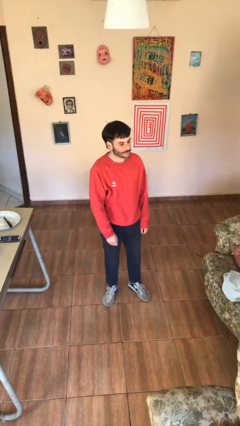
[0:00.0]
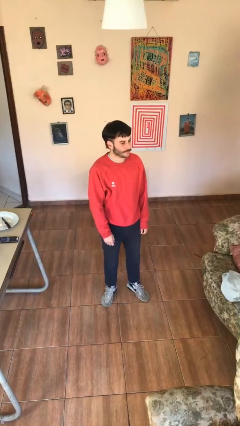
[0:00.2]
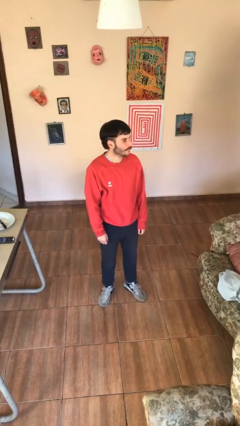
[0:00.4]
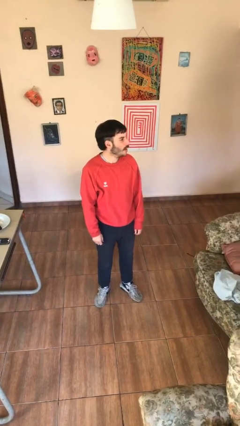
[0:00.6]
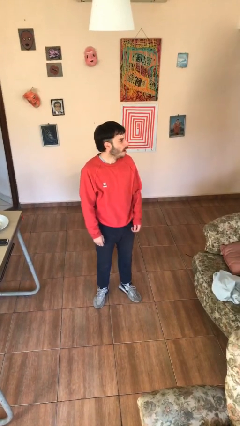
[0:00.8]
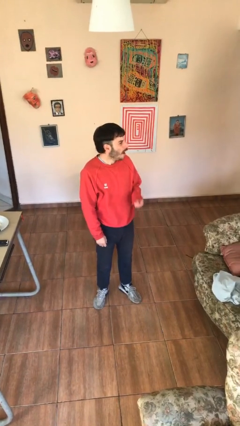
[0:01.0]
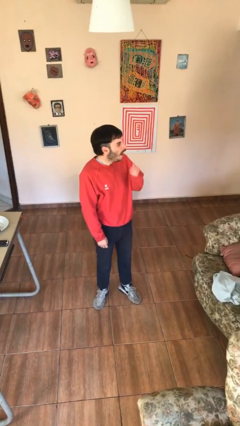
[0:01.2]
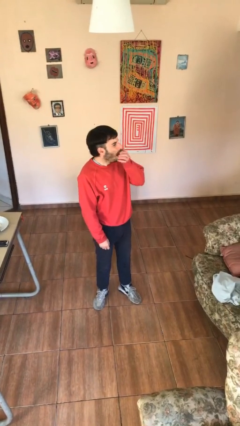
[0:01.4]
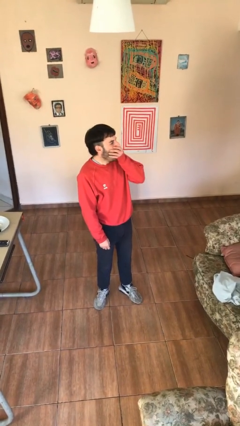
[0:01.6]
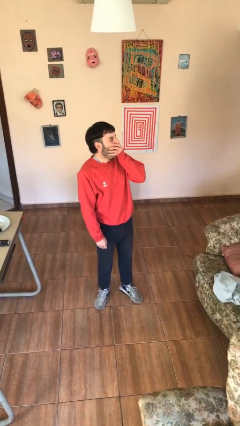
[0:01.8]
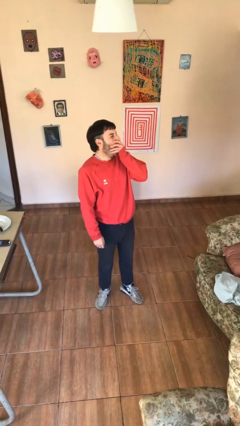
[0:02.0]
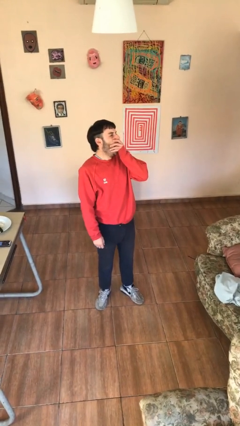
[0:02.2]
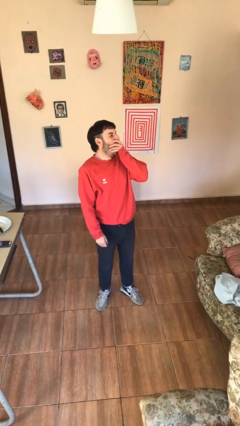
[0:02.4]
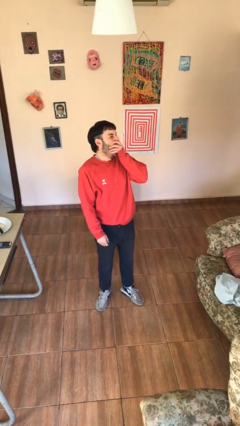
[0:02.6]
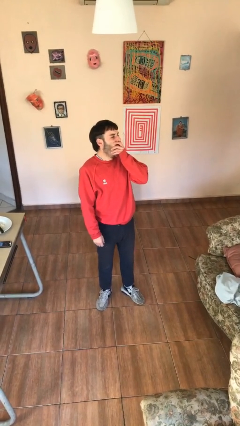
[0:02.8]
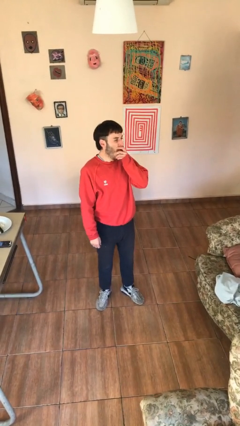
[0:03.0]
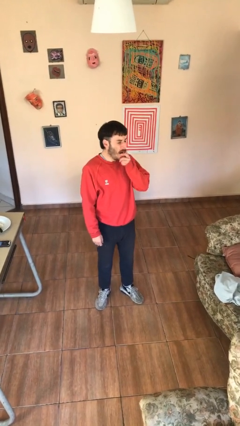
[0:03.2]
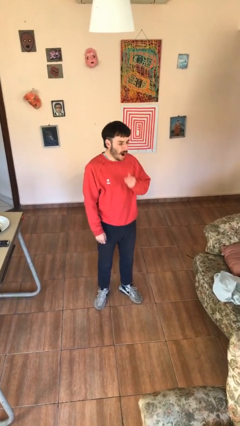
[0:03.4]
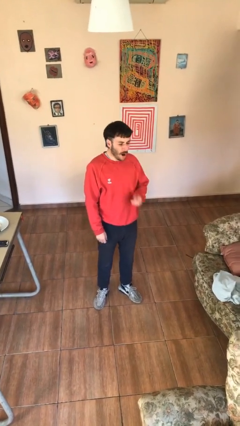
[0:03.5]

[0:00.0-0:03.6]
person yawns

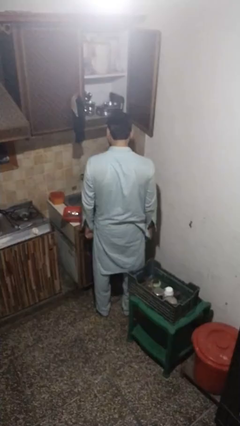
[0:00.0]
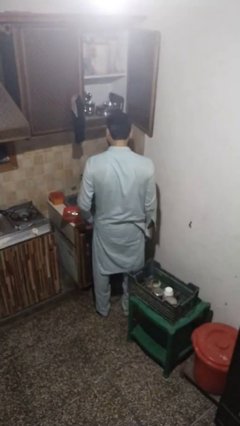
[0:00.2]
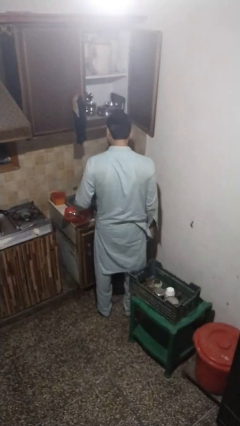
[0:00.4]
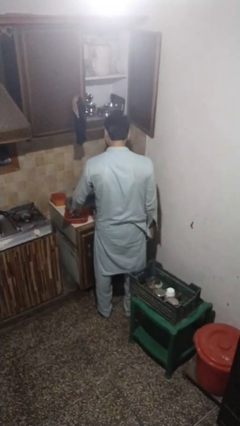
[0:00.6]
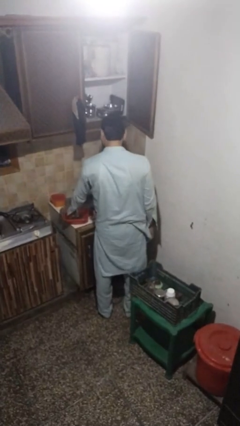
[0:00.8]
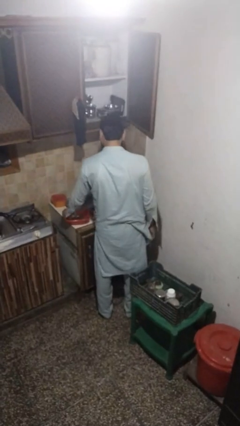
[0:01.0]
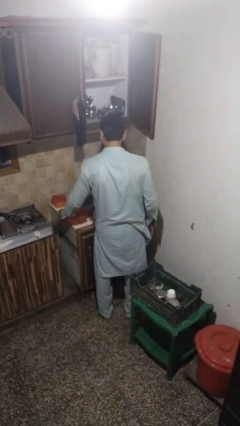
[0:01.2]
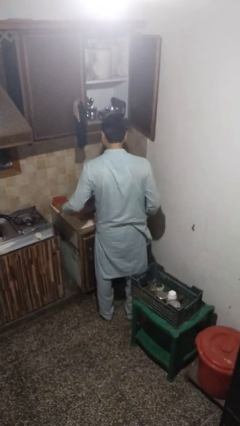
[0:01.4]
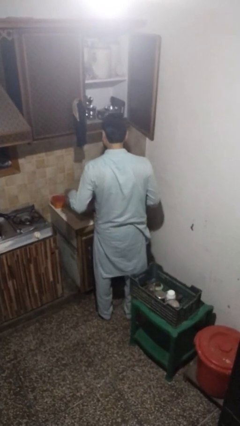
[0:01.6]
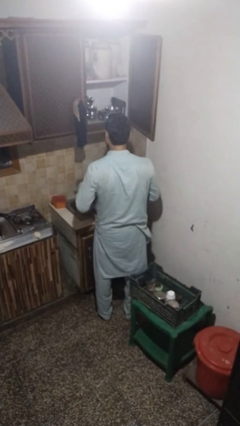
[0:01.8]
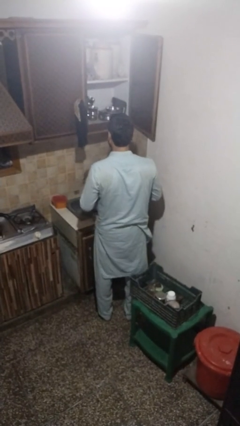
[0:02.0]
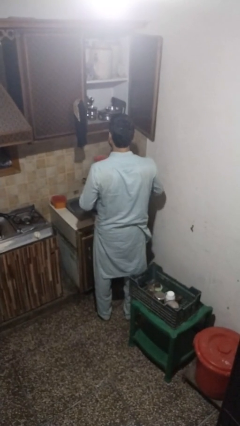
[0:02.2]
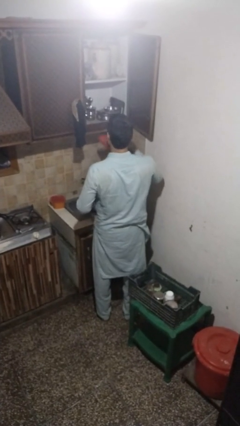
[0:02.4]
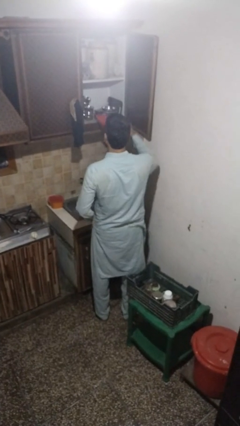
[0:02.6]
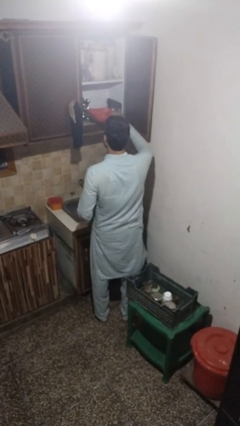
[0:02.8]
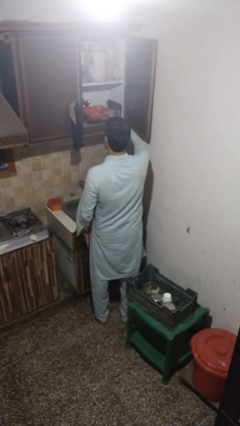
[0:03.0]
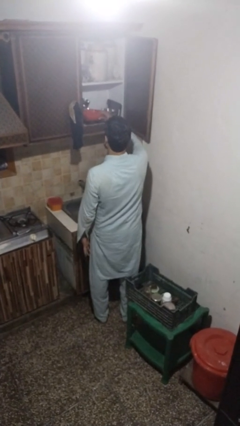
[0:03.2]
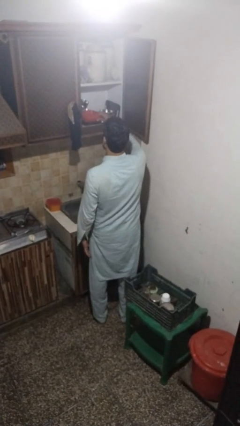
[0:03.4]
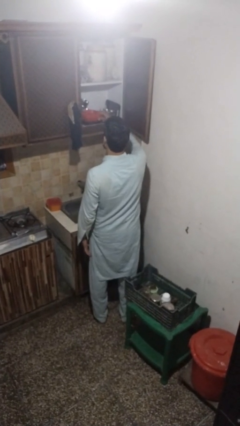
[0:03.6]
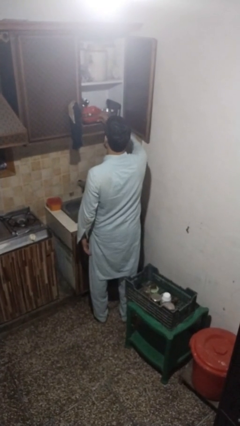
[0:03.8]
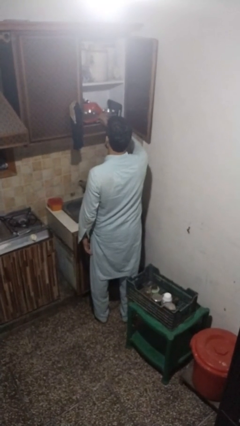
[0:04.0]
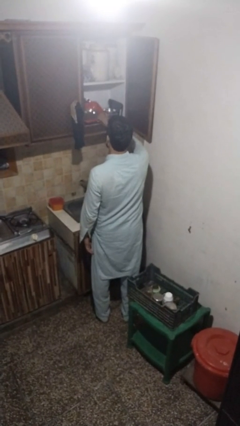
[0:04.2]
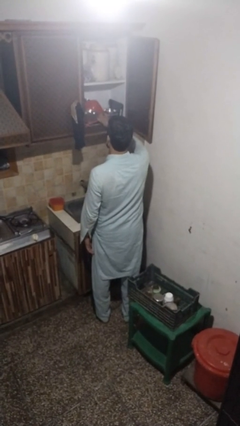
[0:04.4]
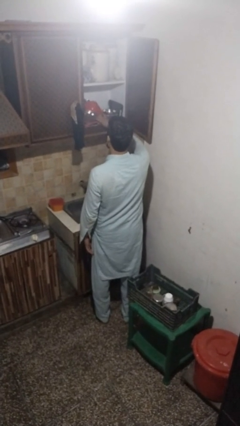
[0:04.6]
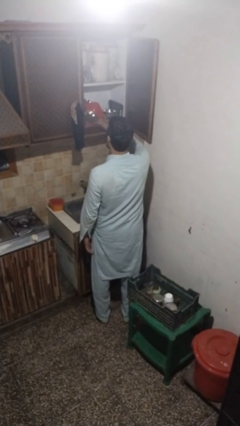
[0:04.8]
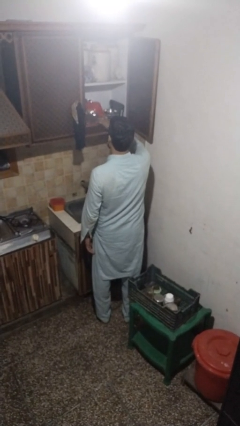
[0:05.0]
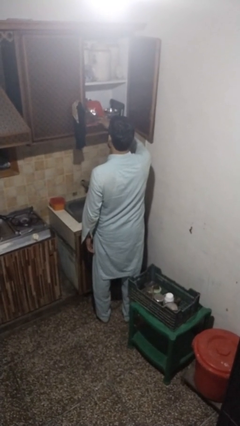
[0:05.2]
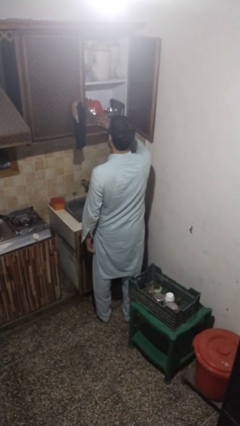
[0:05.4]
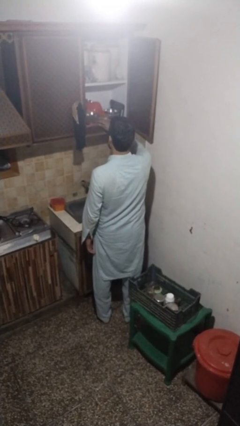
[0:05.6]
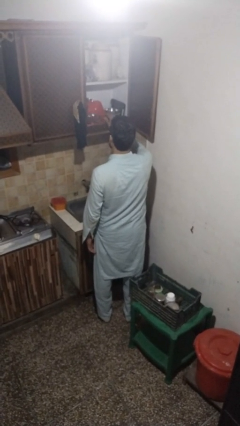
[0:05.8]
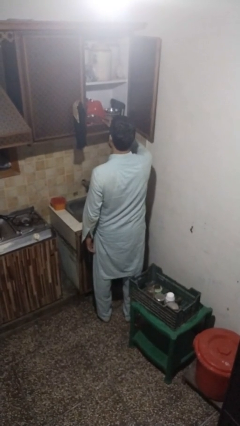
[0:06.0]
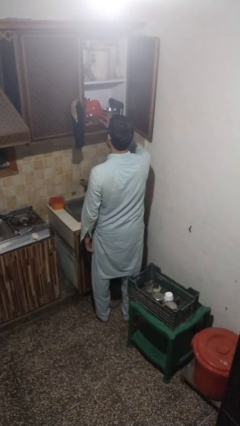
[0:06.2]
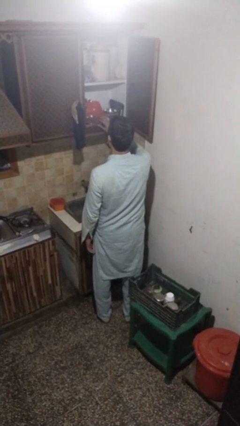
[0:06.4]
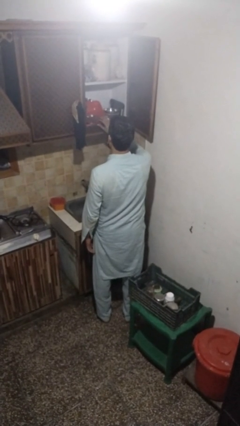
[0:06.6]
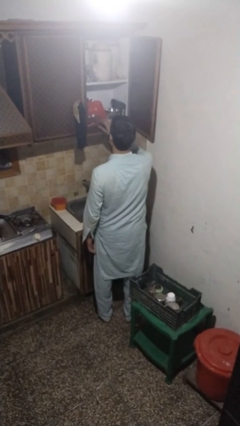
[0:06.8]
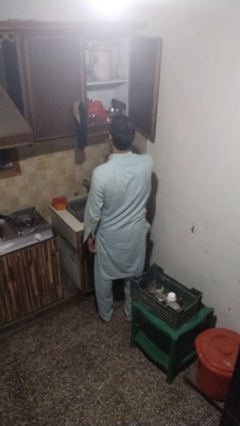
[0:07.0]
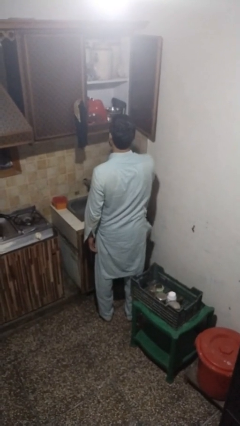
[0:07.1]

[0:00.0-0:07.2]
person puts object in cabinet

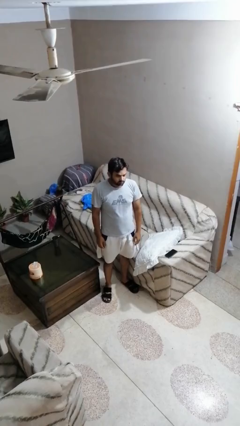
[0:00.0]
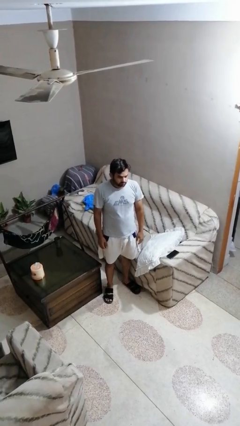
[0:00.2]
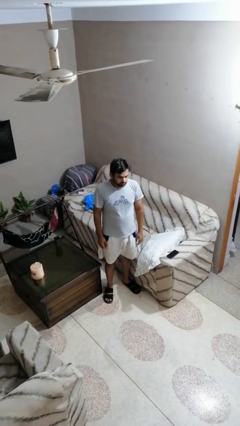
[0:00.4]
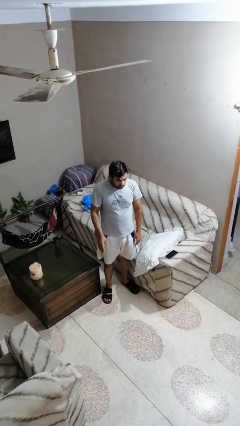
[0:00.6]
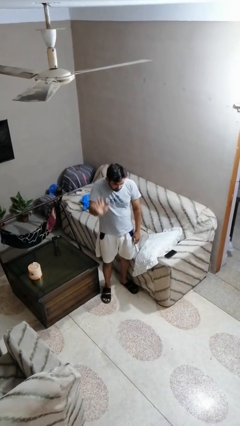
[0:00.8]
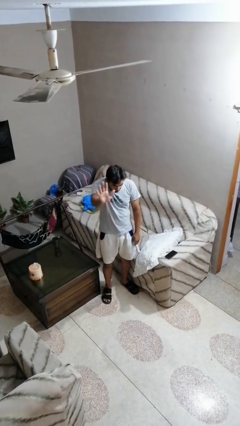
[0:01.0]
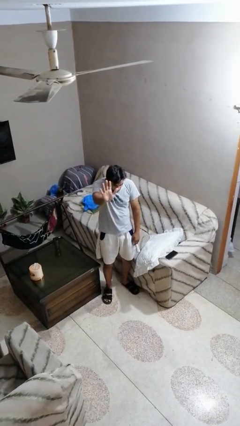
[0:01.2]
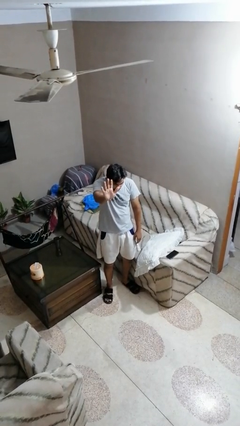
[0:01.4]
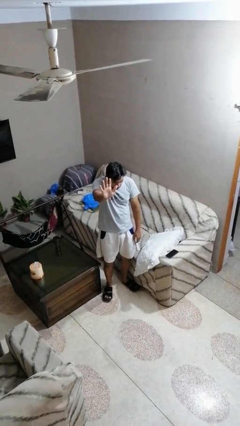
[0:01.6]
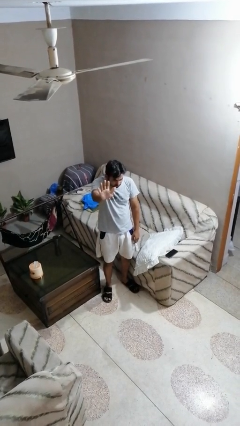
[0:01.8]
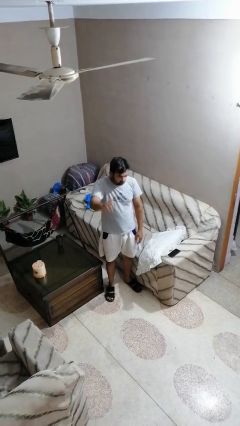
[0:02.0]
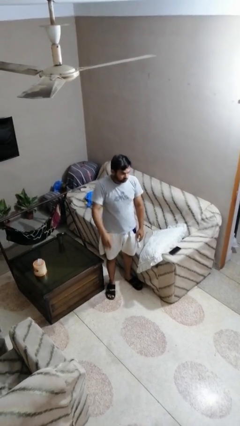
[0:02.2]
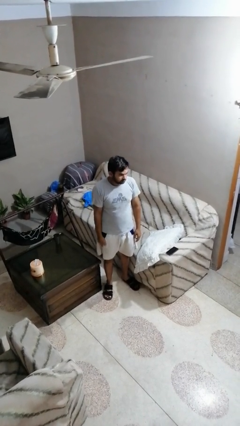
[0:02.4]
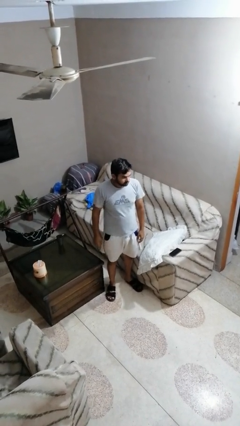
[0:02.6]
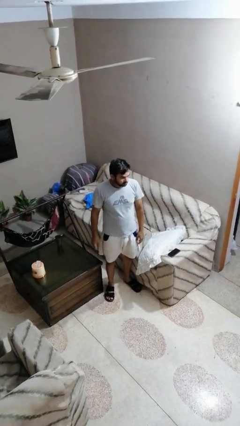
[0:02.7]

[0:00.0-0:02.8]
person gestures stop

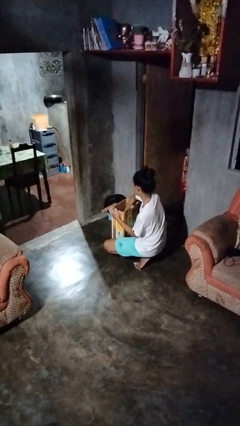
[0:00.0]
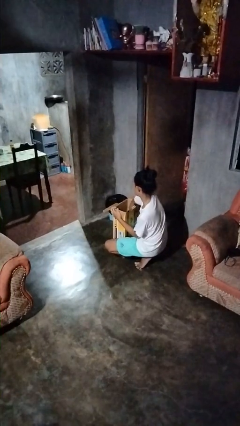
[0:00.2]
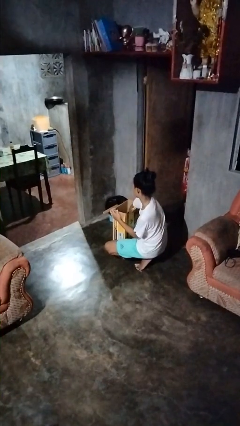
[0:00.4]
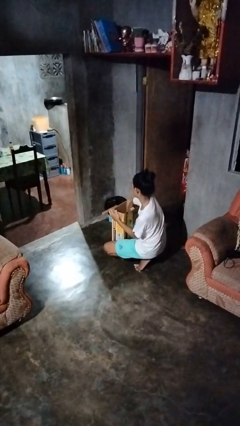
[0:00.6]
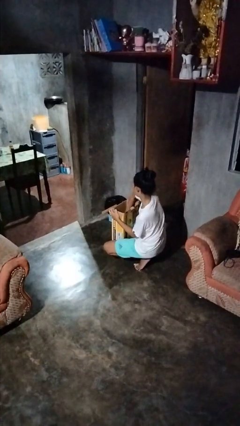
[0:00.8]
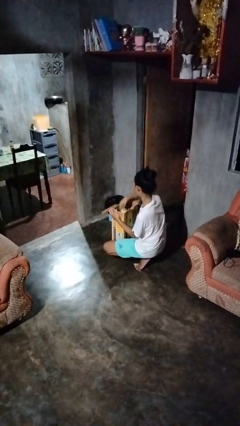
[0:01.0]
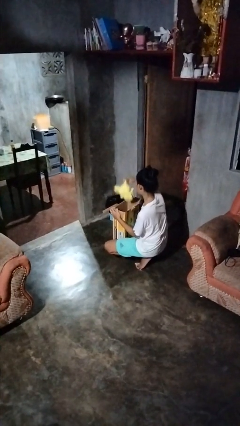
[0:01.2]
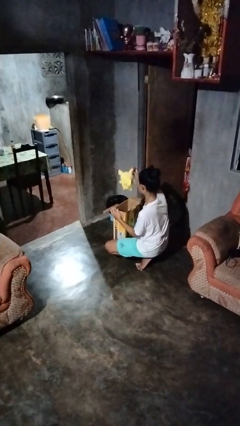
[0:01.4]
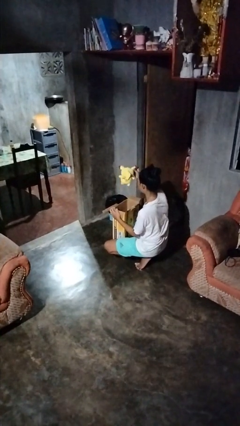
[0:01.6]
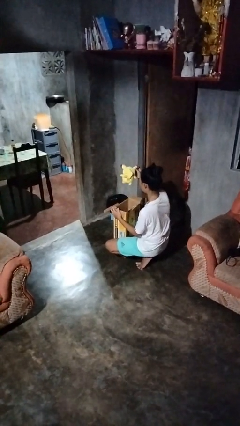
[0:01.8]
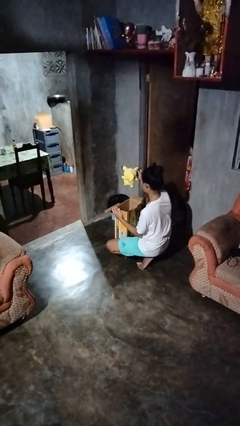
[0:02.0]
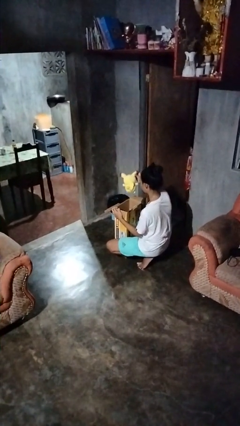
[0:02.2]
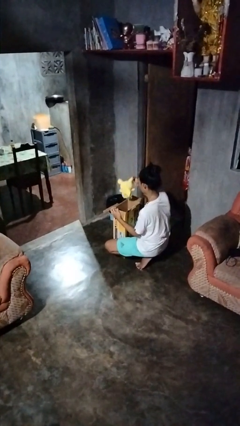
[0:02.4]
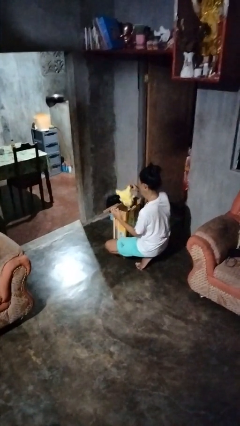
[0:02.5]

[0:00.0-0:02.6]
person takes object from box

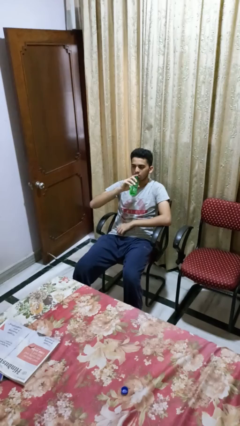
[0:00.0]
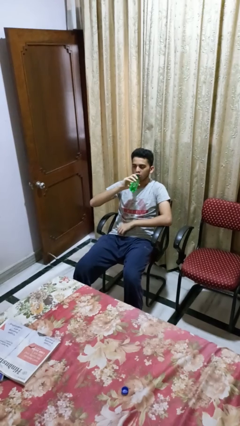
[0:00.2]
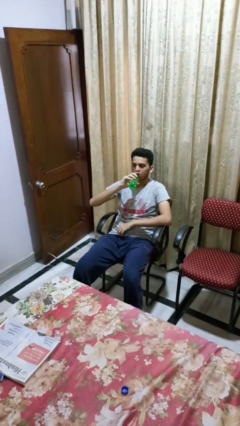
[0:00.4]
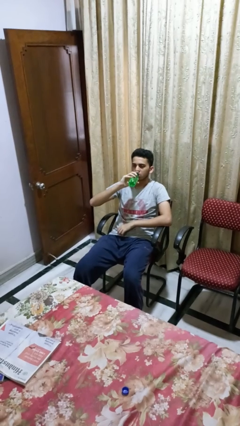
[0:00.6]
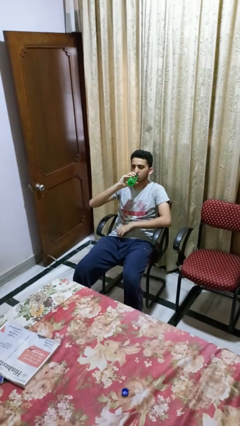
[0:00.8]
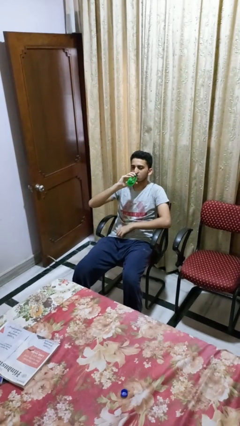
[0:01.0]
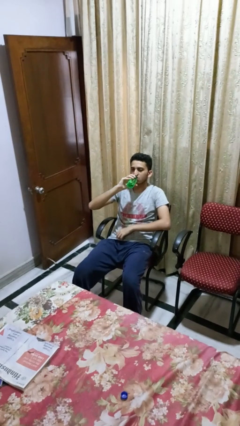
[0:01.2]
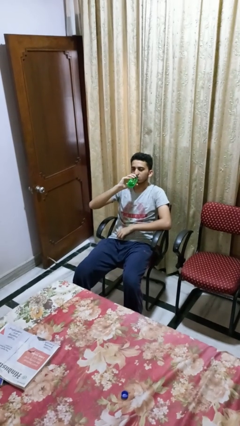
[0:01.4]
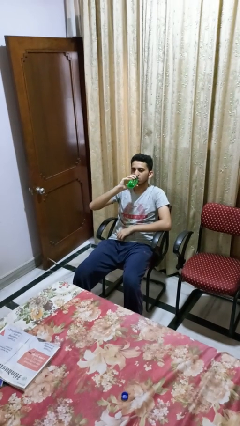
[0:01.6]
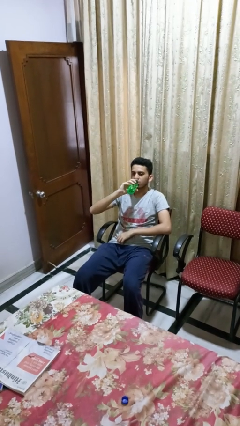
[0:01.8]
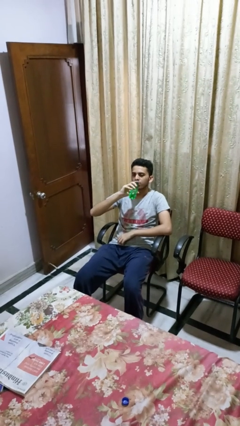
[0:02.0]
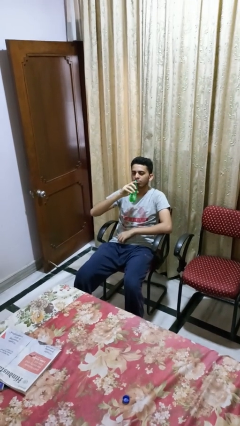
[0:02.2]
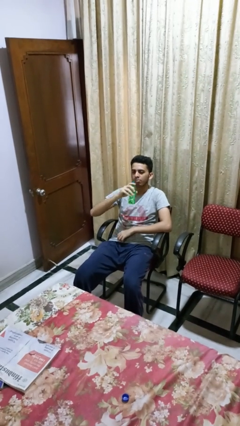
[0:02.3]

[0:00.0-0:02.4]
person drinks from bottle
